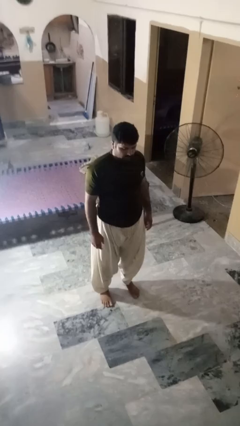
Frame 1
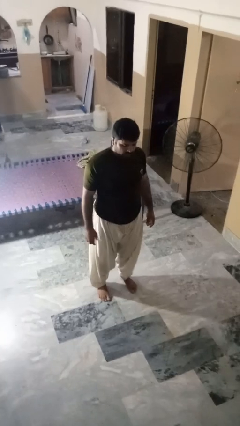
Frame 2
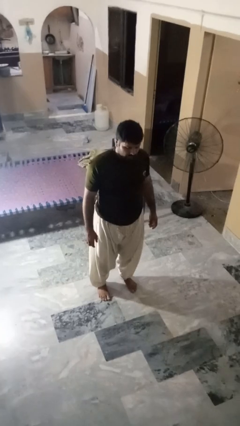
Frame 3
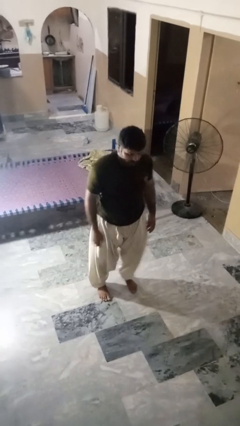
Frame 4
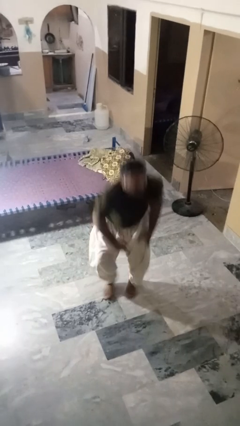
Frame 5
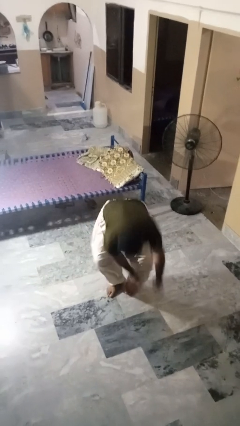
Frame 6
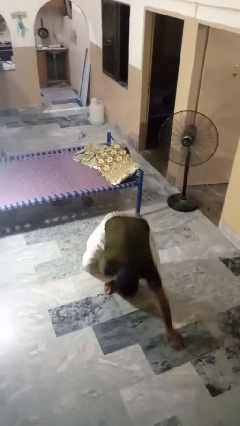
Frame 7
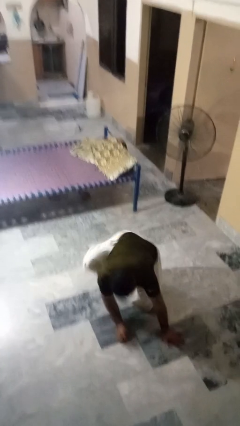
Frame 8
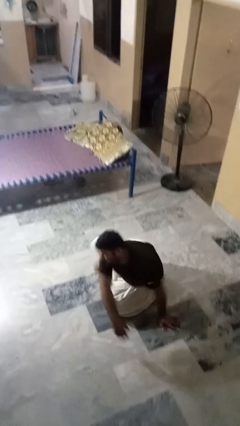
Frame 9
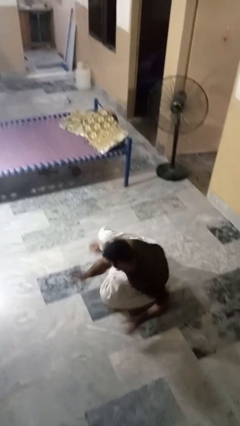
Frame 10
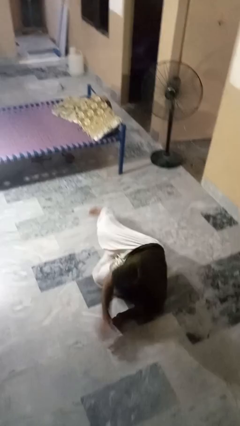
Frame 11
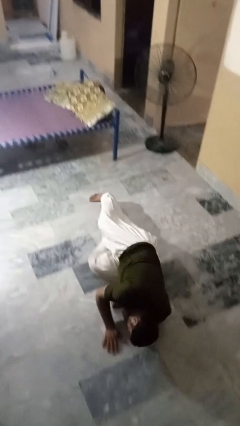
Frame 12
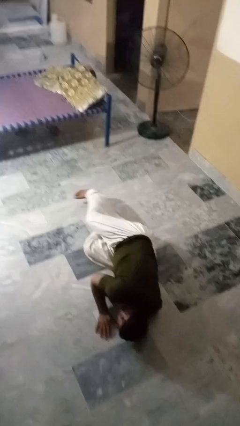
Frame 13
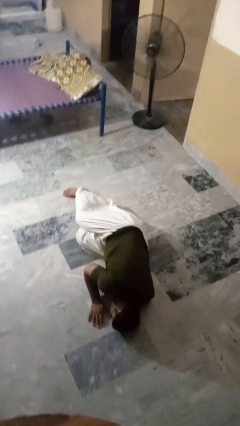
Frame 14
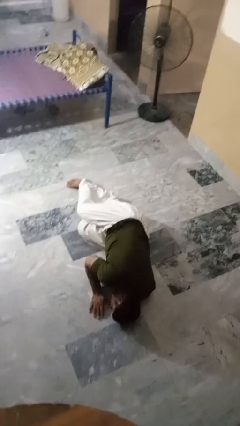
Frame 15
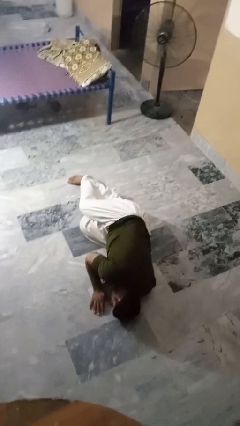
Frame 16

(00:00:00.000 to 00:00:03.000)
person falls while standing

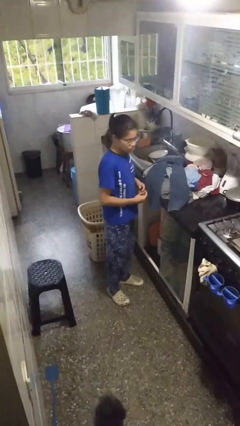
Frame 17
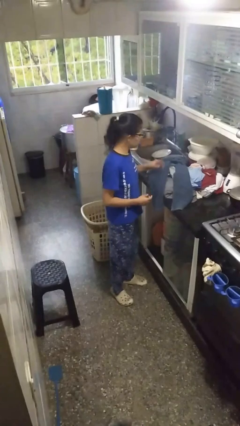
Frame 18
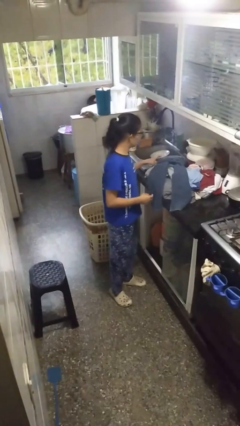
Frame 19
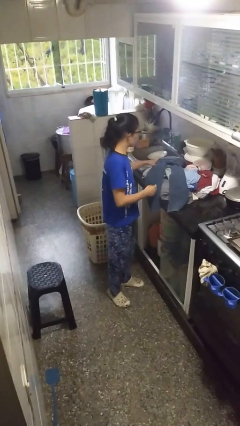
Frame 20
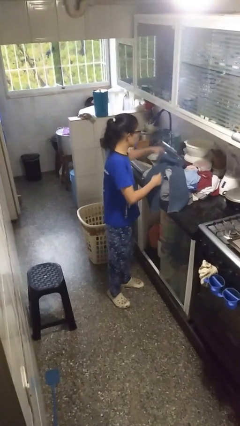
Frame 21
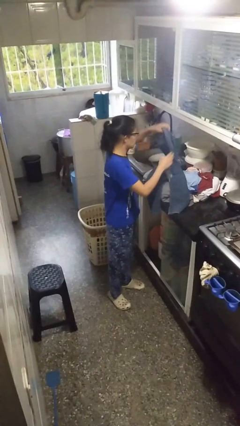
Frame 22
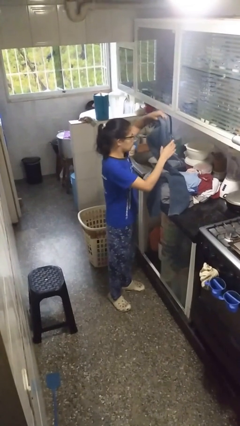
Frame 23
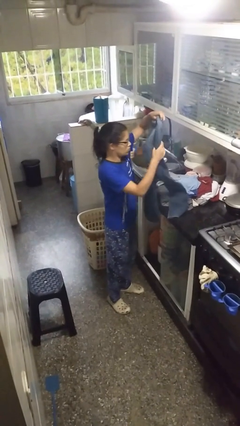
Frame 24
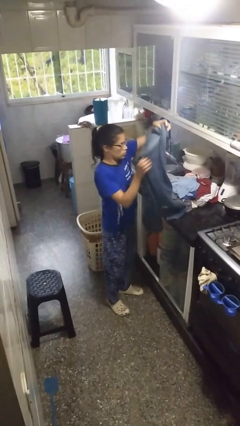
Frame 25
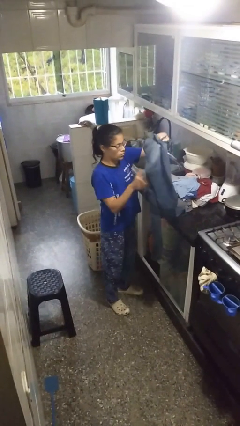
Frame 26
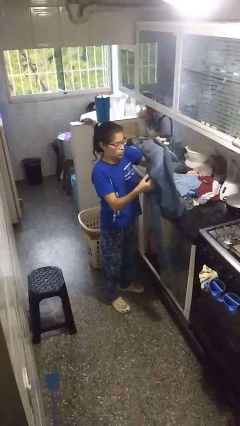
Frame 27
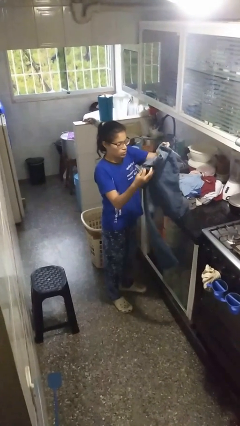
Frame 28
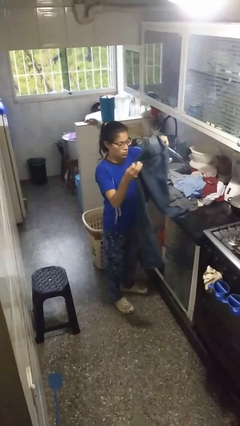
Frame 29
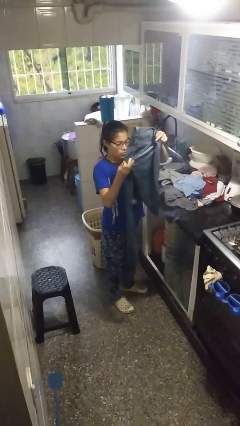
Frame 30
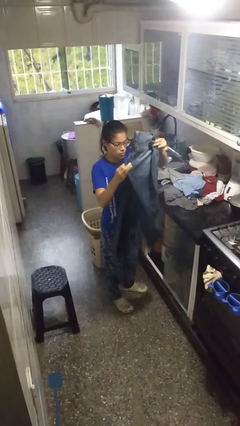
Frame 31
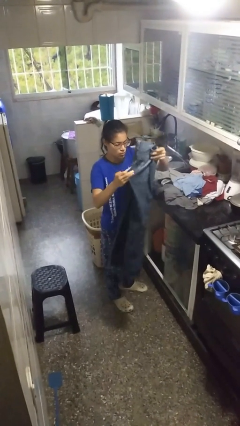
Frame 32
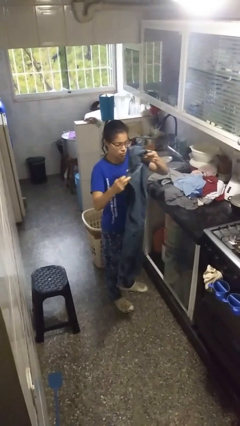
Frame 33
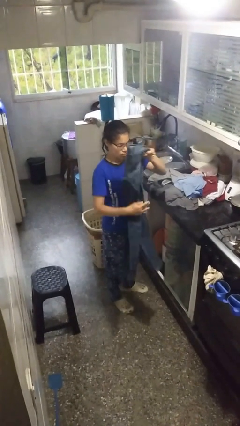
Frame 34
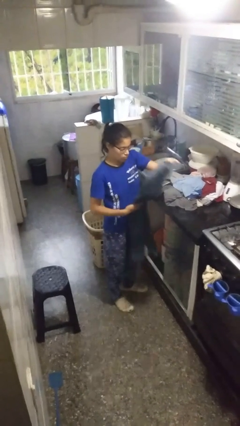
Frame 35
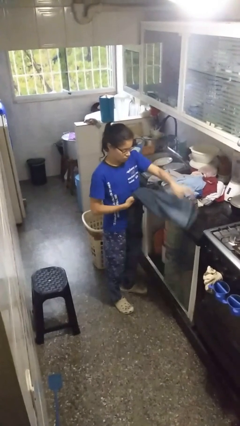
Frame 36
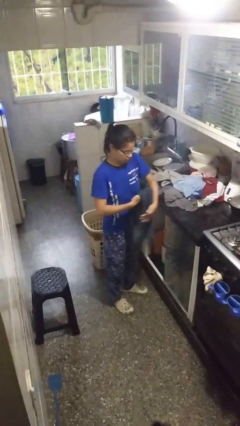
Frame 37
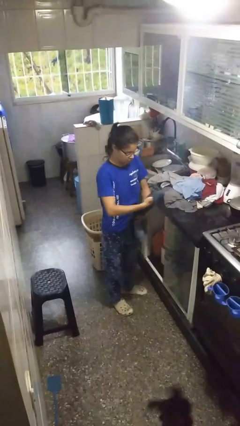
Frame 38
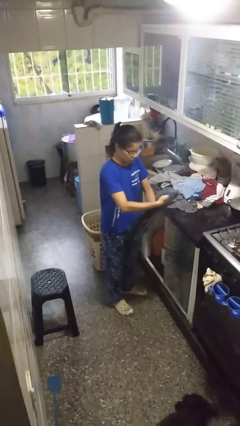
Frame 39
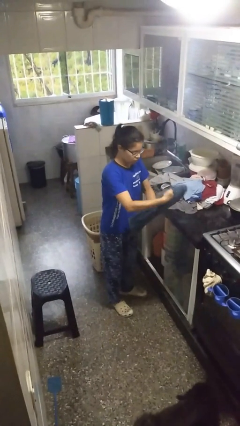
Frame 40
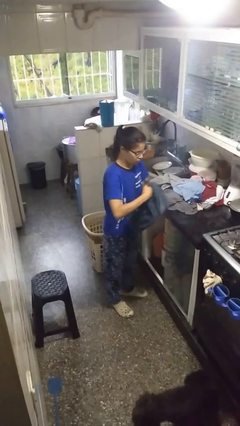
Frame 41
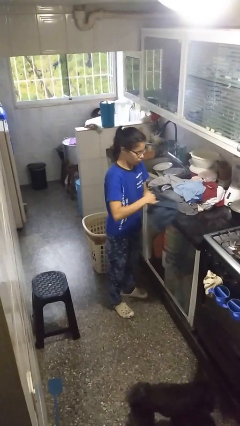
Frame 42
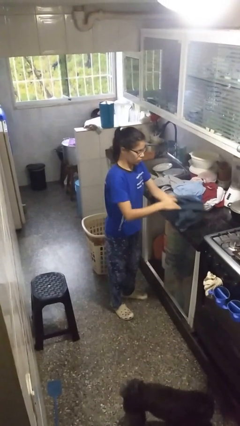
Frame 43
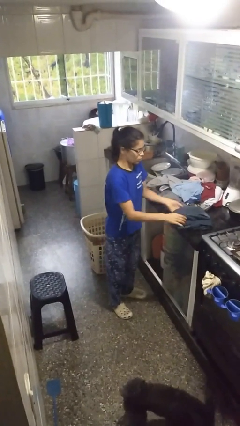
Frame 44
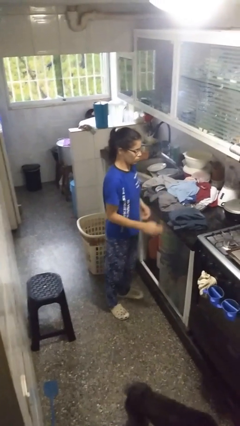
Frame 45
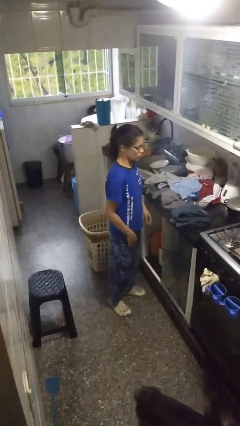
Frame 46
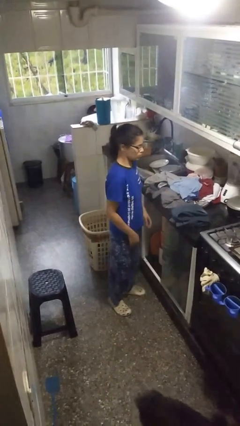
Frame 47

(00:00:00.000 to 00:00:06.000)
person folds pants

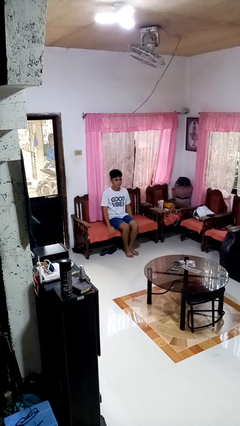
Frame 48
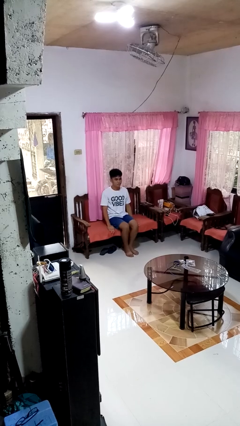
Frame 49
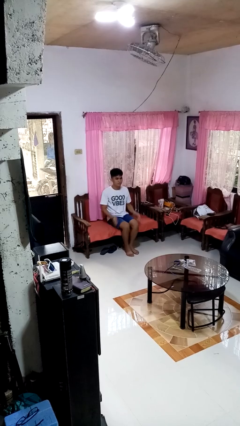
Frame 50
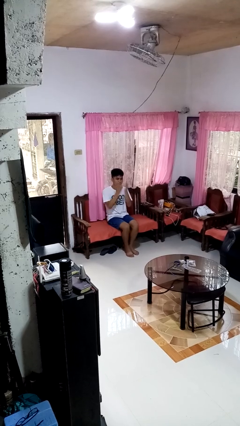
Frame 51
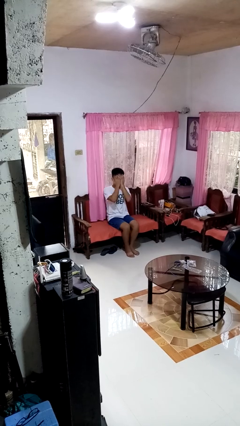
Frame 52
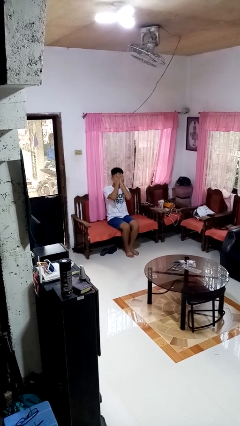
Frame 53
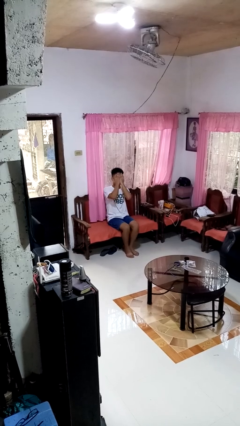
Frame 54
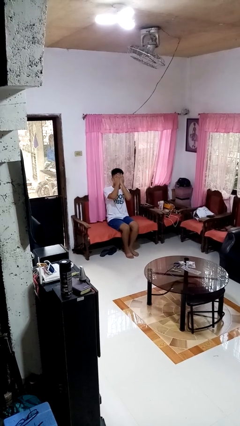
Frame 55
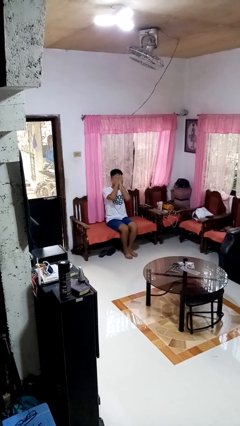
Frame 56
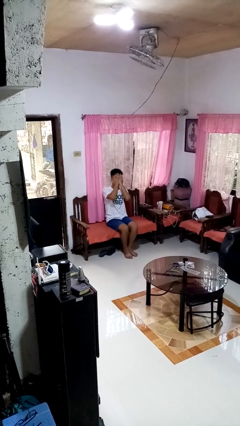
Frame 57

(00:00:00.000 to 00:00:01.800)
person covers face with hands

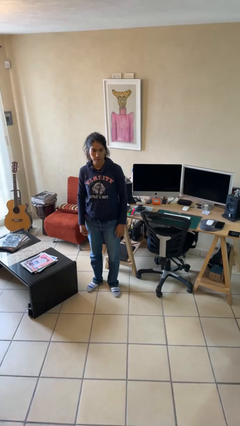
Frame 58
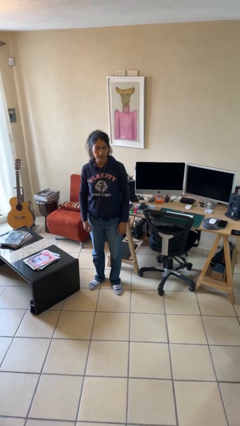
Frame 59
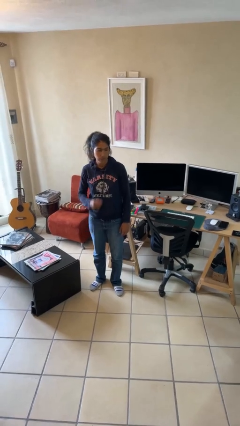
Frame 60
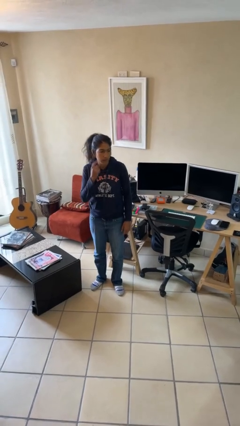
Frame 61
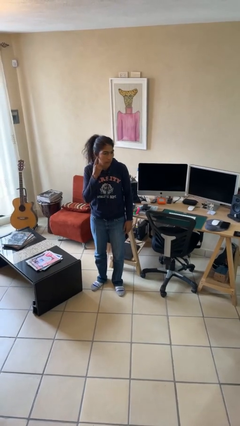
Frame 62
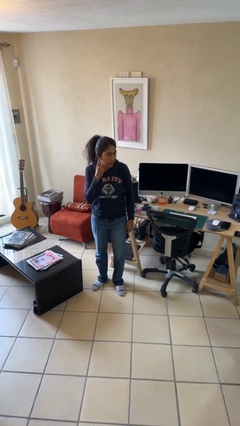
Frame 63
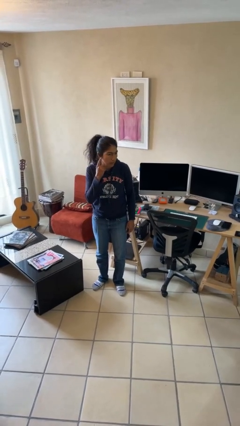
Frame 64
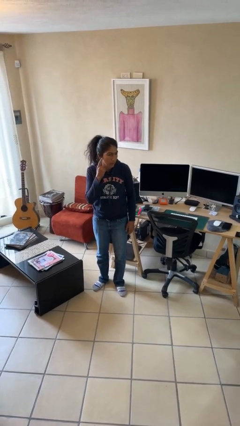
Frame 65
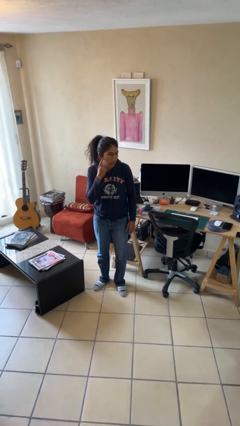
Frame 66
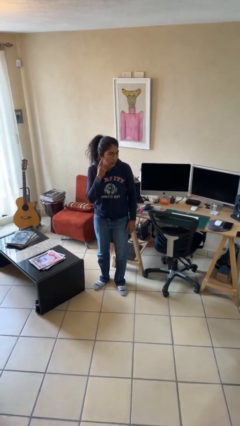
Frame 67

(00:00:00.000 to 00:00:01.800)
person gestures listen closely

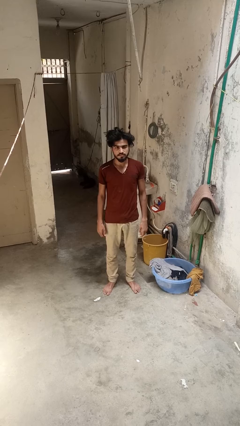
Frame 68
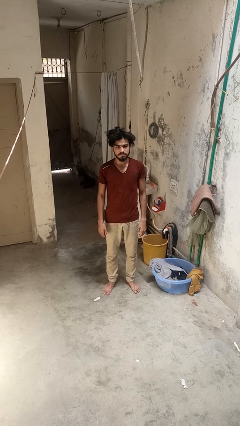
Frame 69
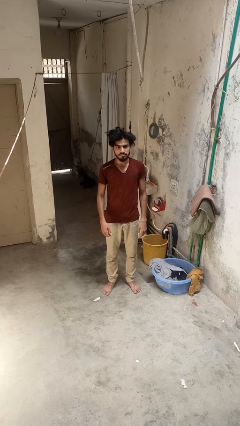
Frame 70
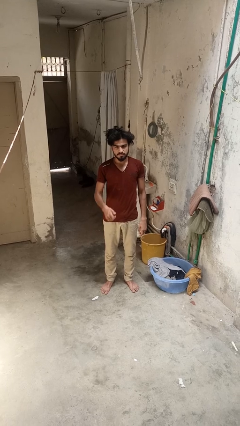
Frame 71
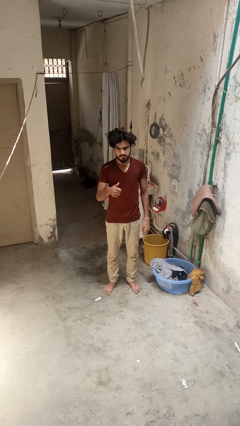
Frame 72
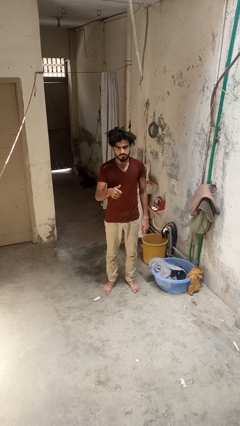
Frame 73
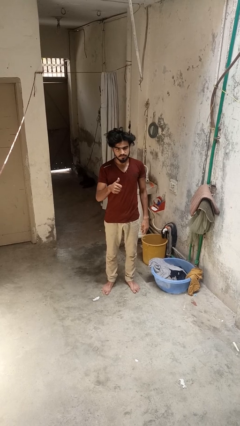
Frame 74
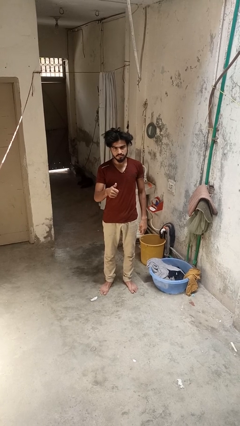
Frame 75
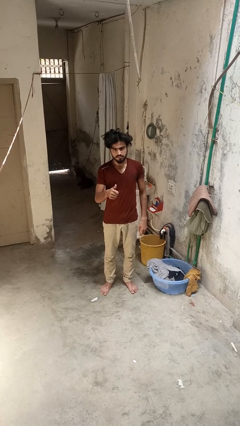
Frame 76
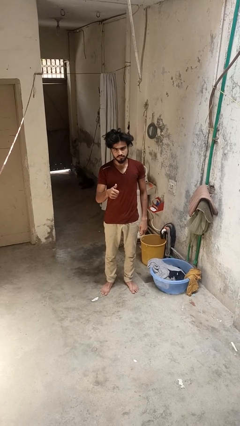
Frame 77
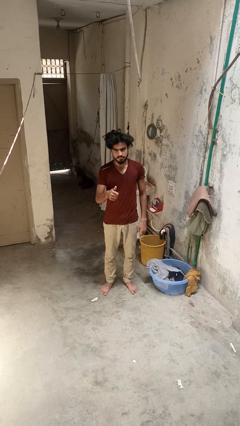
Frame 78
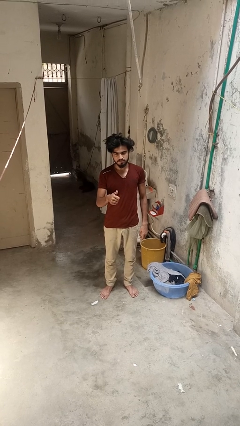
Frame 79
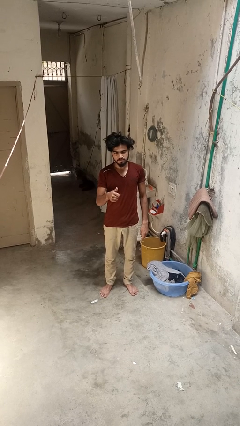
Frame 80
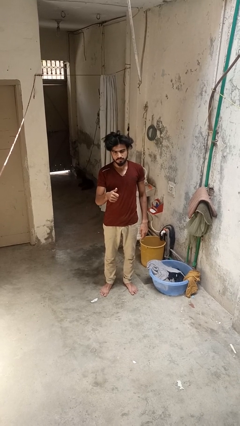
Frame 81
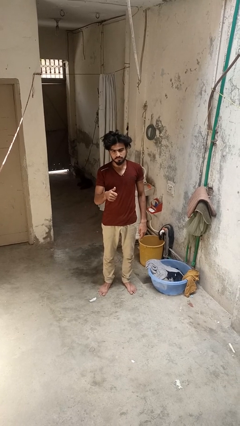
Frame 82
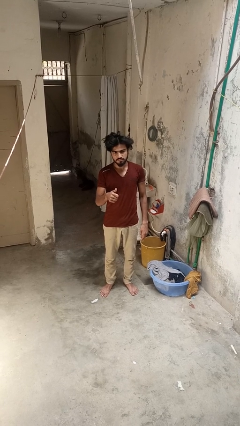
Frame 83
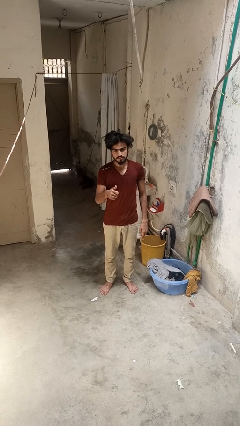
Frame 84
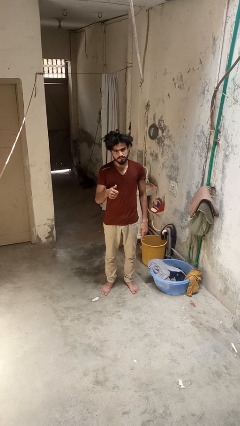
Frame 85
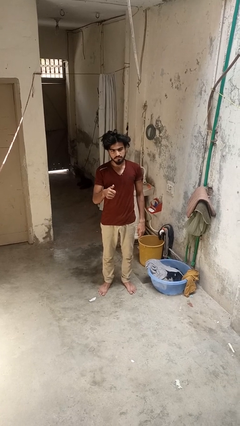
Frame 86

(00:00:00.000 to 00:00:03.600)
person gestures thumbs up

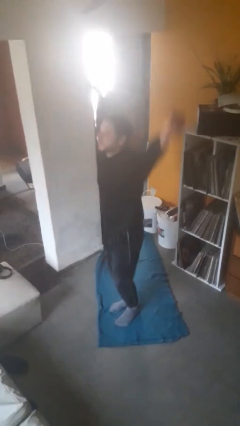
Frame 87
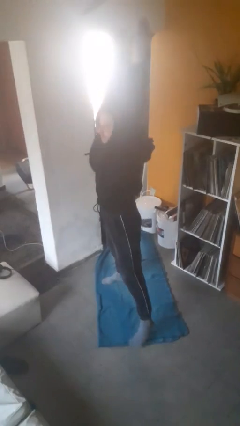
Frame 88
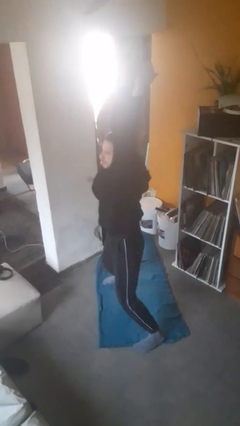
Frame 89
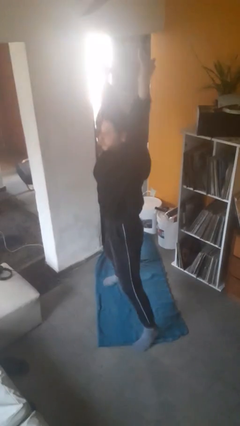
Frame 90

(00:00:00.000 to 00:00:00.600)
person exercises with jumping jacks

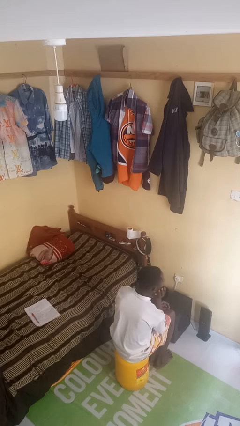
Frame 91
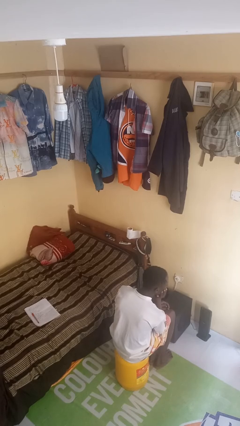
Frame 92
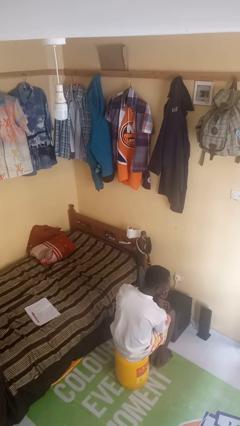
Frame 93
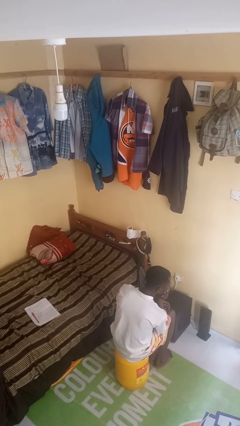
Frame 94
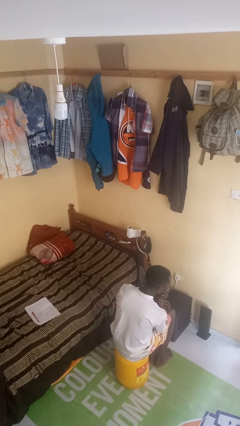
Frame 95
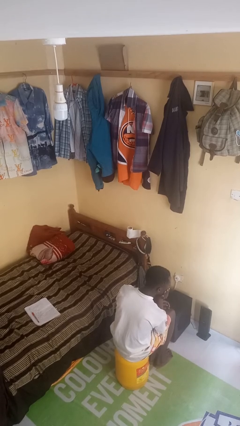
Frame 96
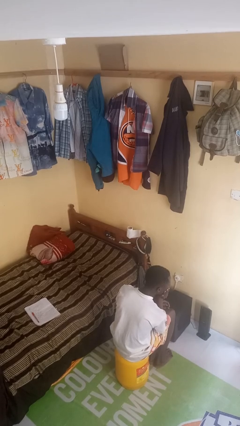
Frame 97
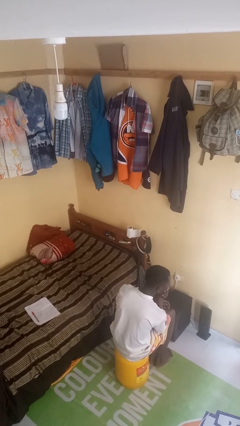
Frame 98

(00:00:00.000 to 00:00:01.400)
person strokes chin
